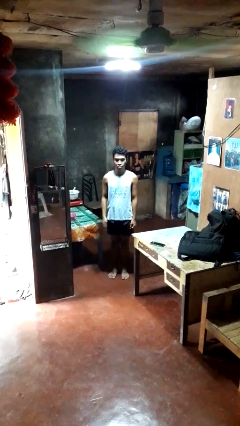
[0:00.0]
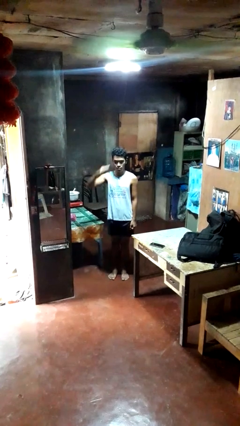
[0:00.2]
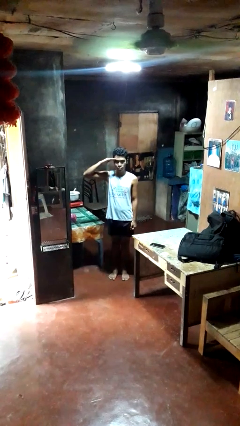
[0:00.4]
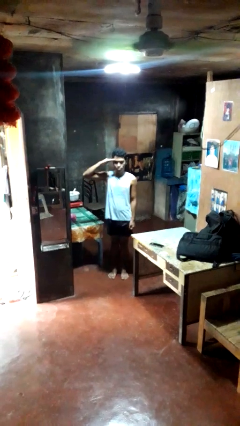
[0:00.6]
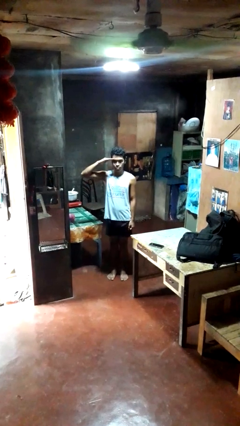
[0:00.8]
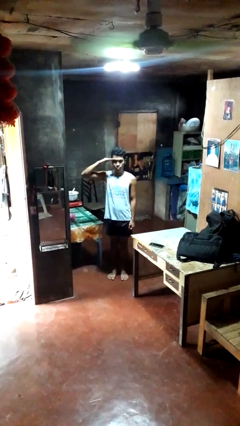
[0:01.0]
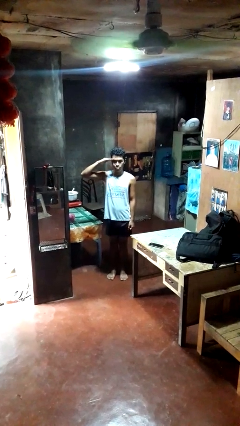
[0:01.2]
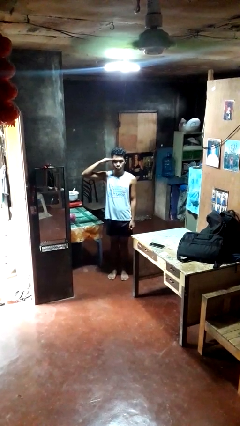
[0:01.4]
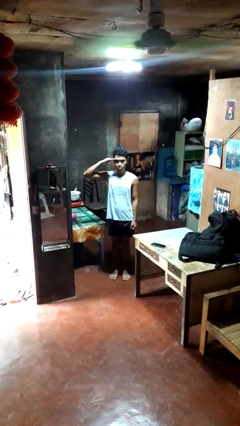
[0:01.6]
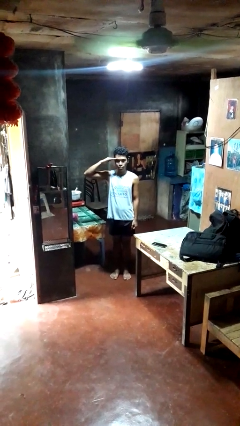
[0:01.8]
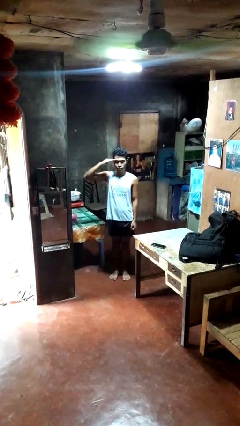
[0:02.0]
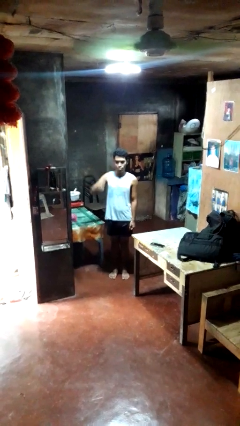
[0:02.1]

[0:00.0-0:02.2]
person salutes

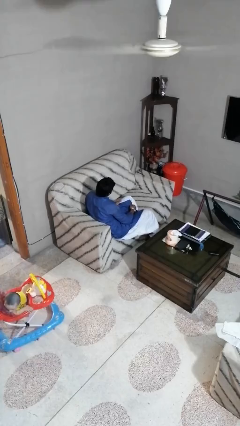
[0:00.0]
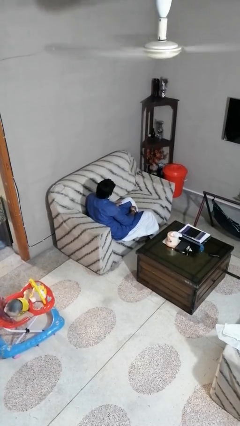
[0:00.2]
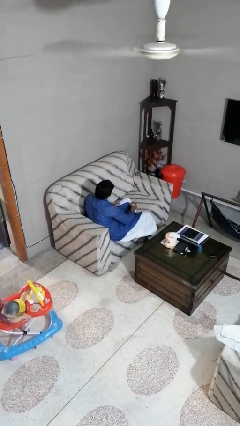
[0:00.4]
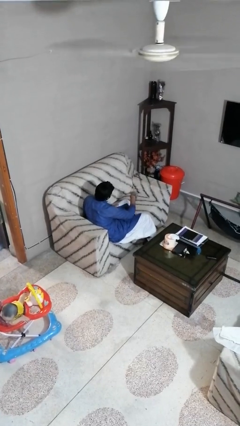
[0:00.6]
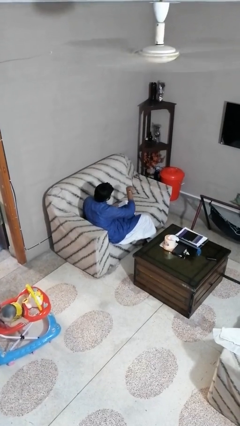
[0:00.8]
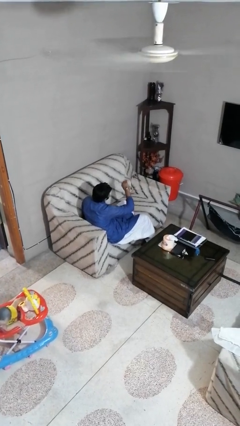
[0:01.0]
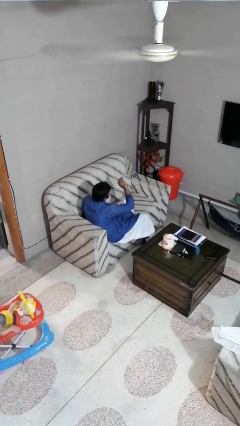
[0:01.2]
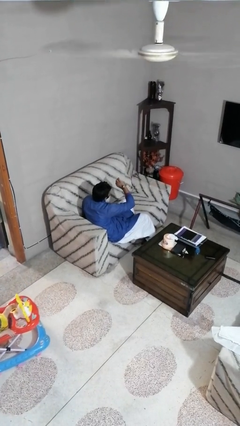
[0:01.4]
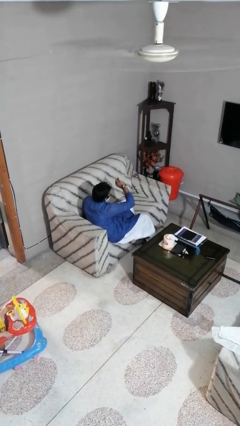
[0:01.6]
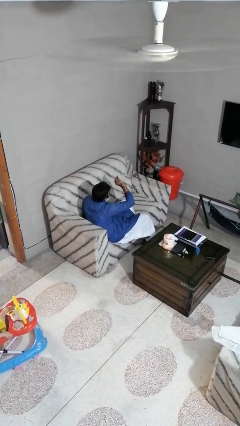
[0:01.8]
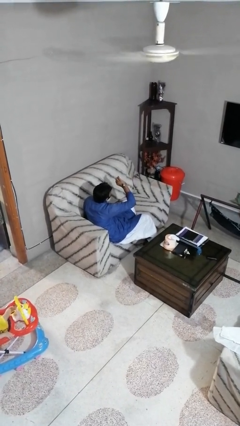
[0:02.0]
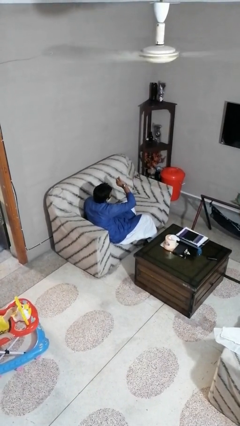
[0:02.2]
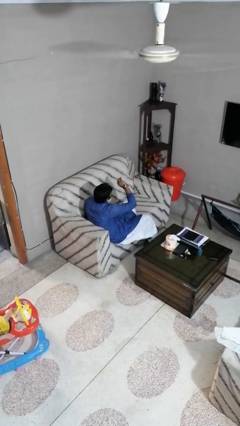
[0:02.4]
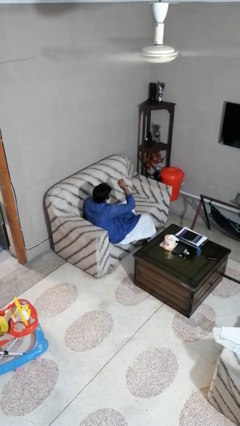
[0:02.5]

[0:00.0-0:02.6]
person looks at wristwatch

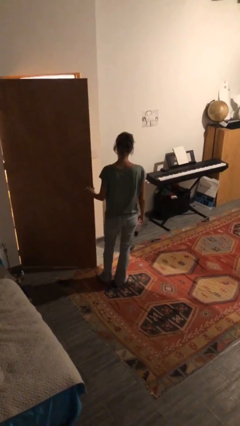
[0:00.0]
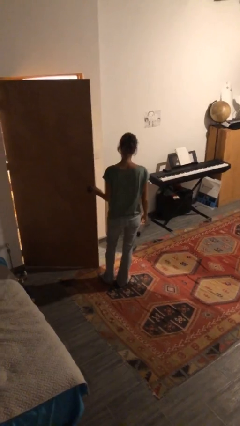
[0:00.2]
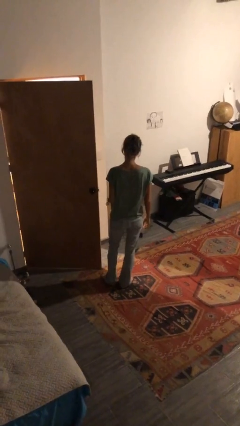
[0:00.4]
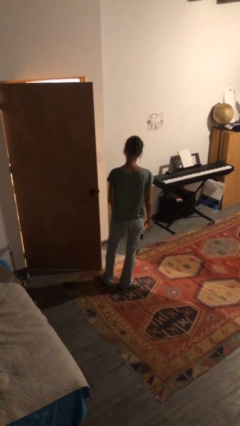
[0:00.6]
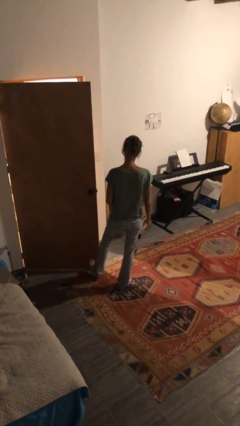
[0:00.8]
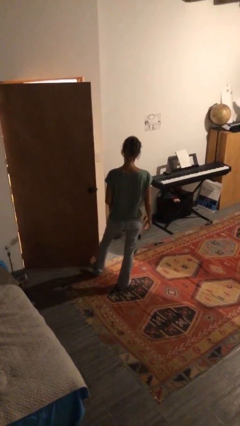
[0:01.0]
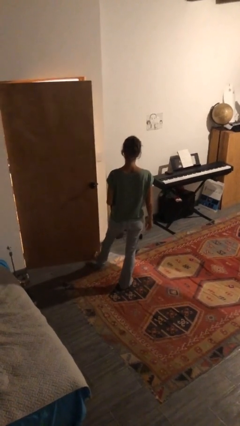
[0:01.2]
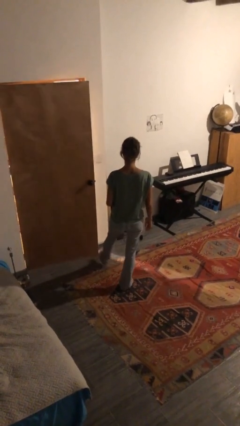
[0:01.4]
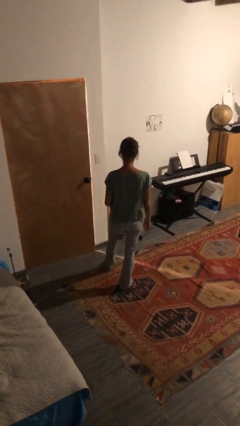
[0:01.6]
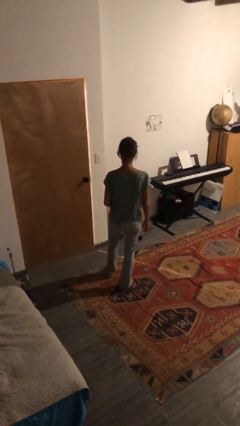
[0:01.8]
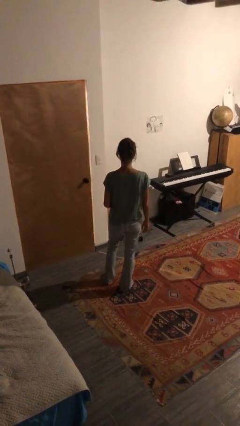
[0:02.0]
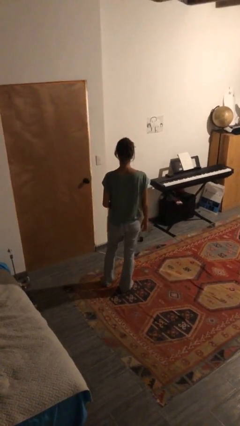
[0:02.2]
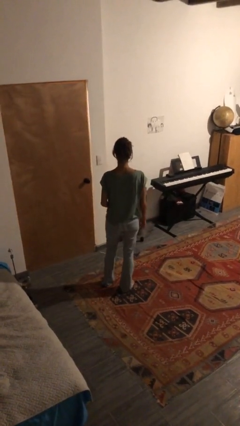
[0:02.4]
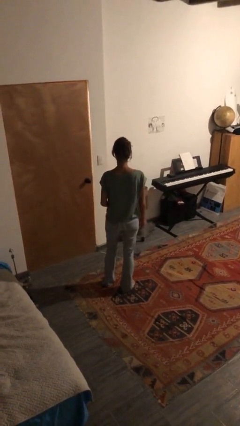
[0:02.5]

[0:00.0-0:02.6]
person closes door with foot

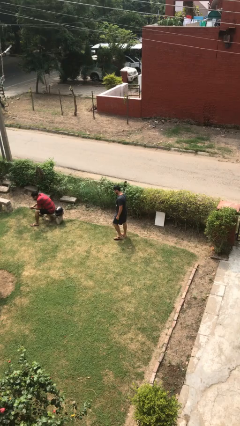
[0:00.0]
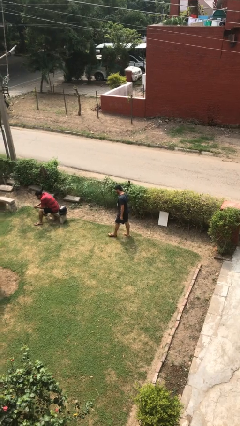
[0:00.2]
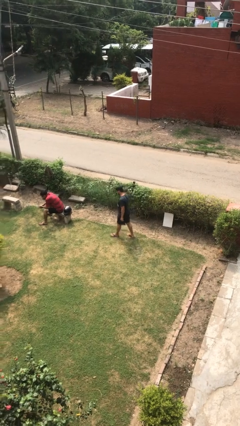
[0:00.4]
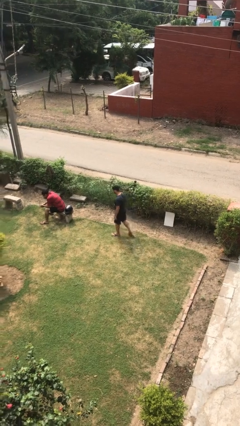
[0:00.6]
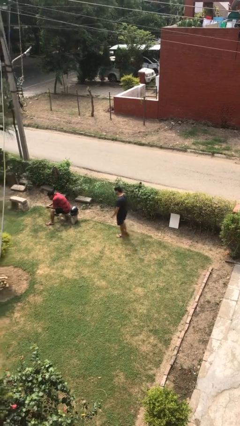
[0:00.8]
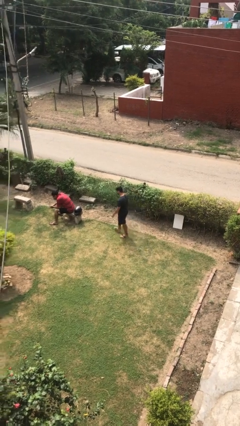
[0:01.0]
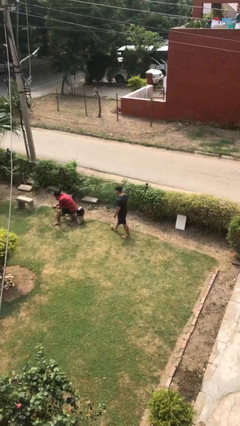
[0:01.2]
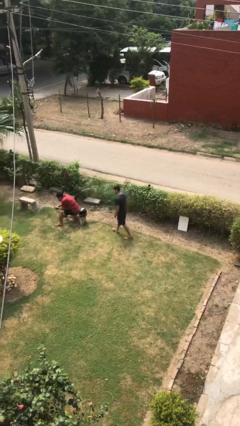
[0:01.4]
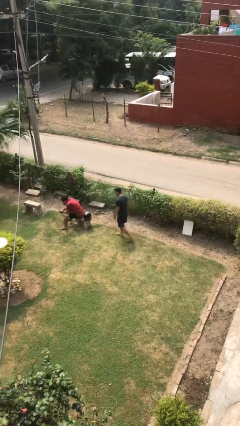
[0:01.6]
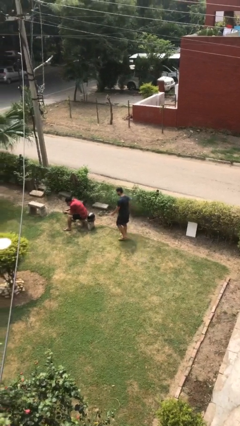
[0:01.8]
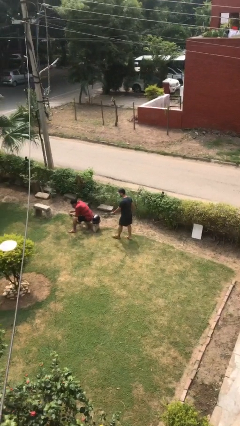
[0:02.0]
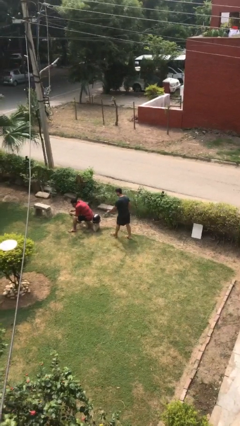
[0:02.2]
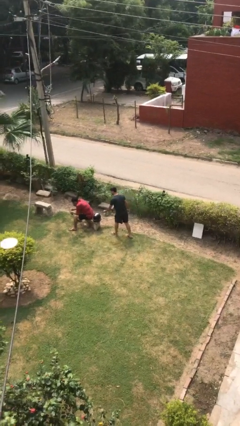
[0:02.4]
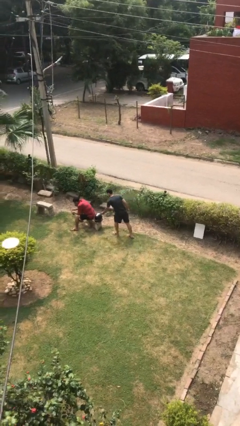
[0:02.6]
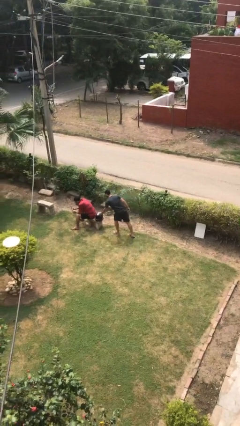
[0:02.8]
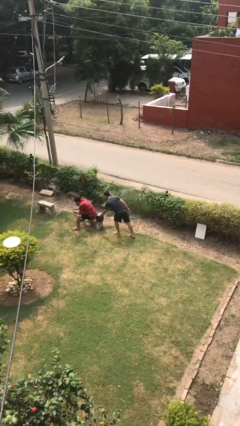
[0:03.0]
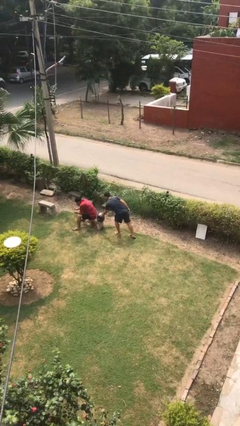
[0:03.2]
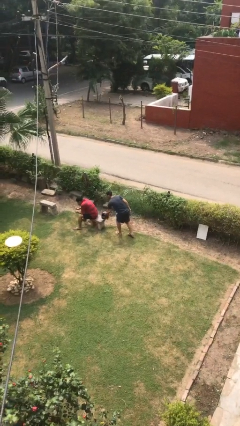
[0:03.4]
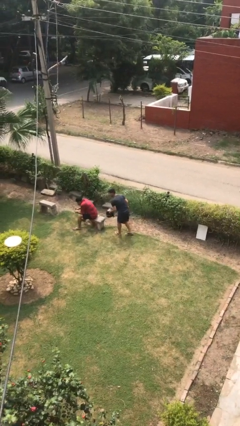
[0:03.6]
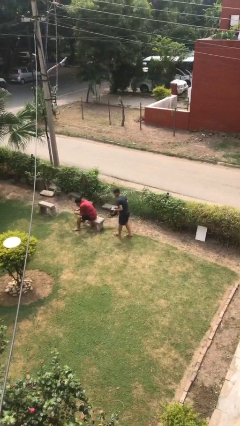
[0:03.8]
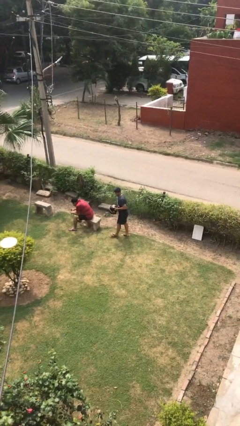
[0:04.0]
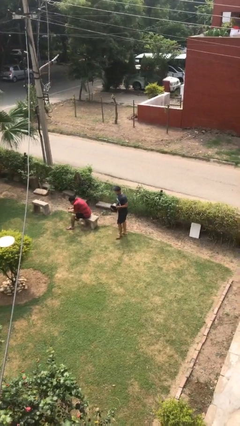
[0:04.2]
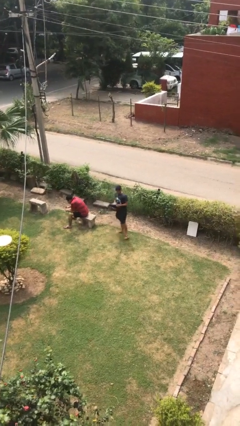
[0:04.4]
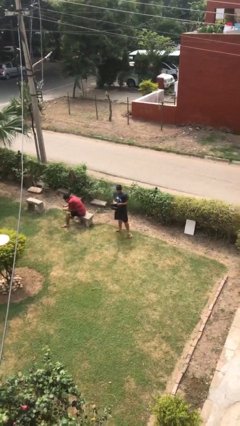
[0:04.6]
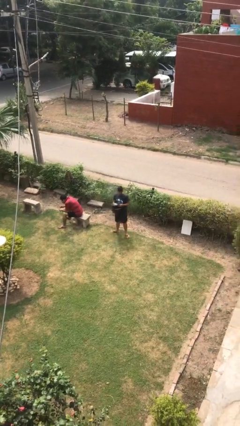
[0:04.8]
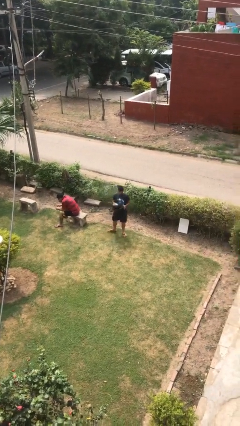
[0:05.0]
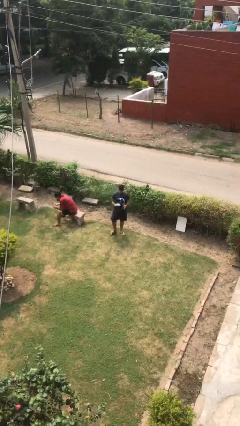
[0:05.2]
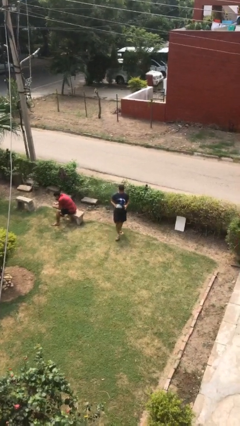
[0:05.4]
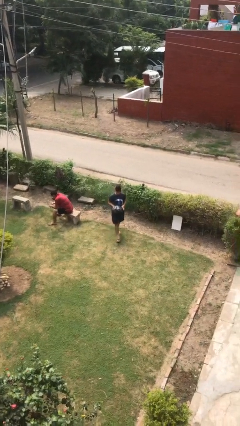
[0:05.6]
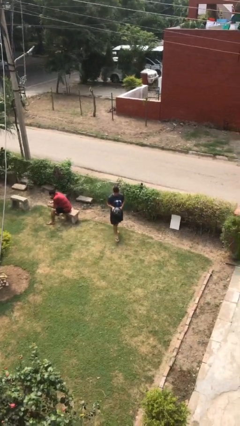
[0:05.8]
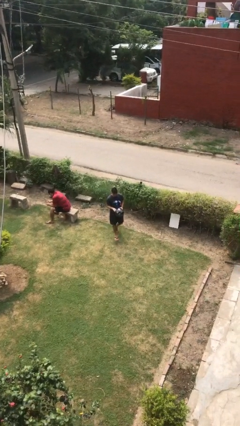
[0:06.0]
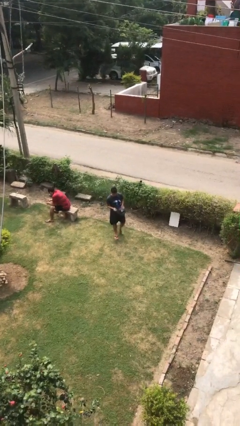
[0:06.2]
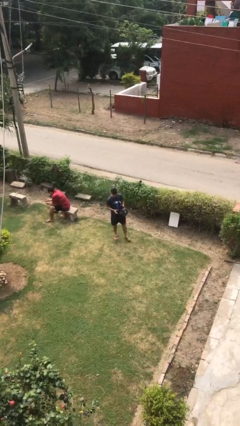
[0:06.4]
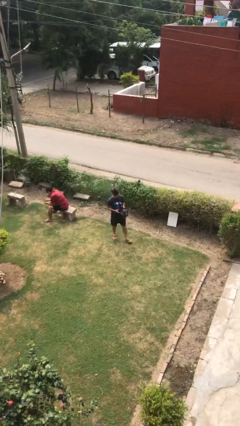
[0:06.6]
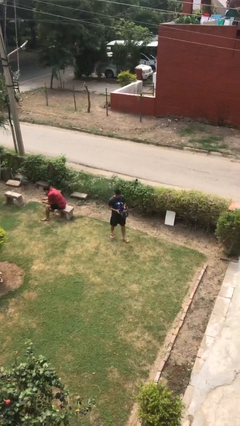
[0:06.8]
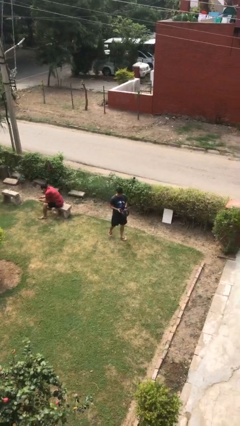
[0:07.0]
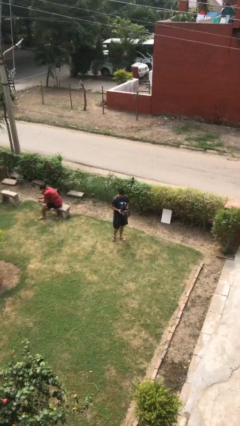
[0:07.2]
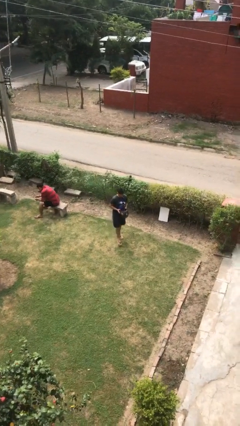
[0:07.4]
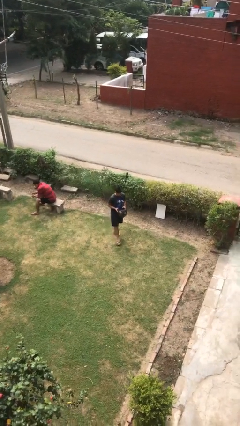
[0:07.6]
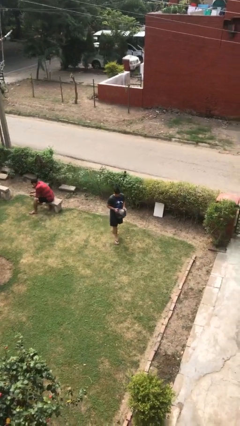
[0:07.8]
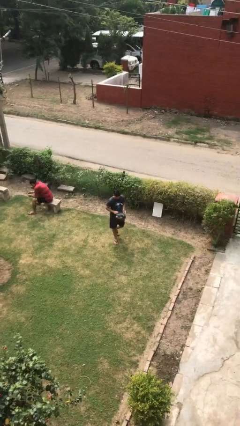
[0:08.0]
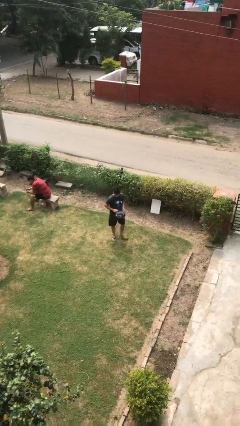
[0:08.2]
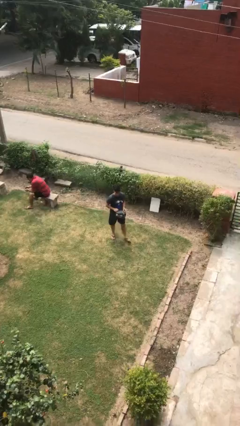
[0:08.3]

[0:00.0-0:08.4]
person steals object from person

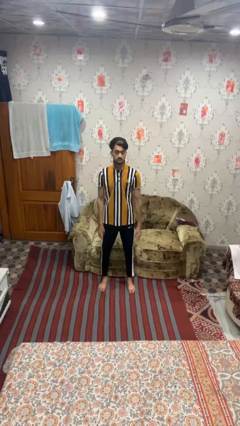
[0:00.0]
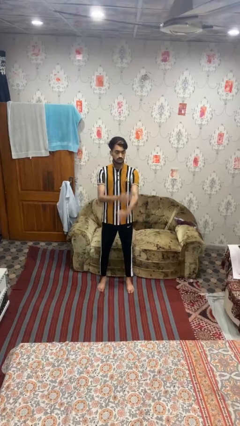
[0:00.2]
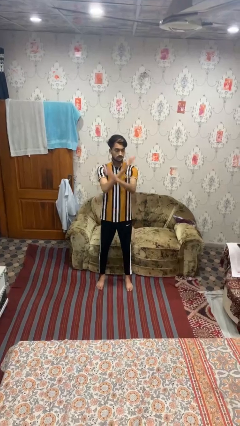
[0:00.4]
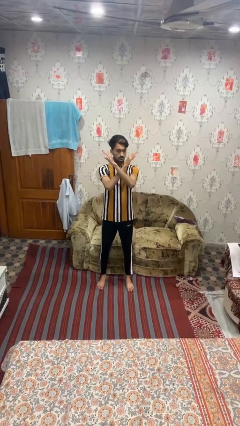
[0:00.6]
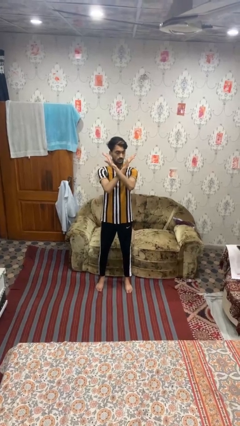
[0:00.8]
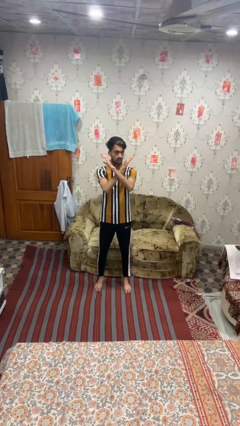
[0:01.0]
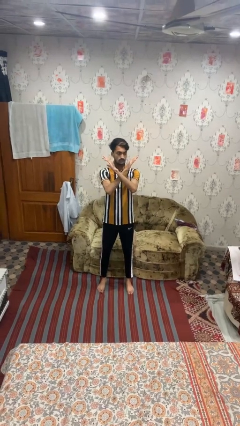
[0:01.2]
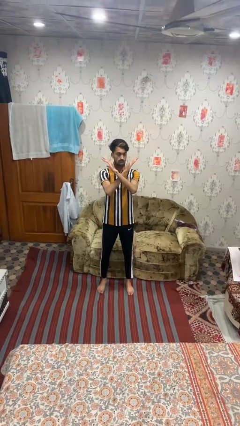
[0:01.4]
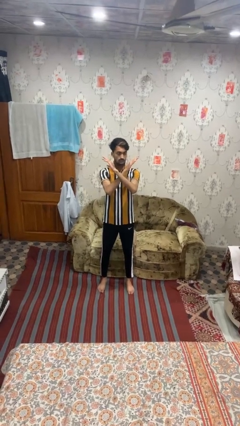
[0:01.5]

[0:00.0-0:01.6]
person gestures arms x
